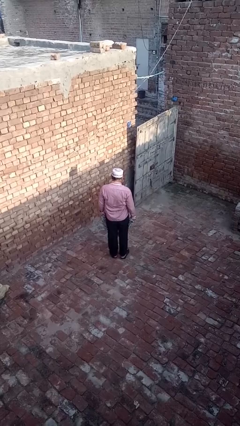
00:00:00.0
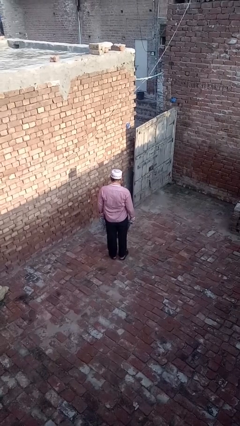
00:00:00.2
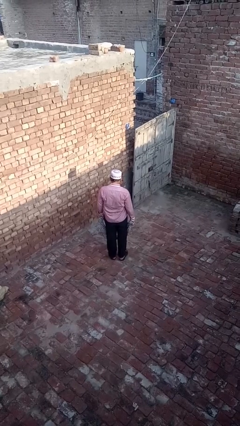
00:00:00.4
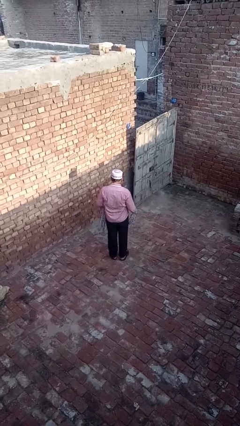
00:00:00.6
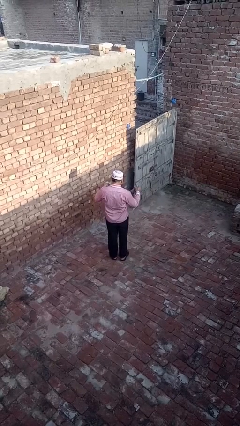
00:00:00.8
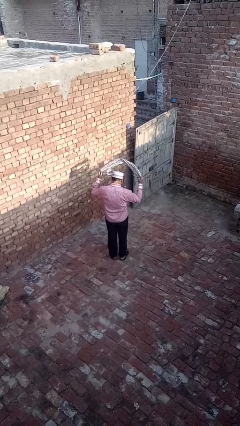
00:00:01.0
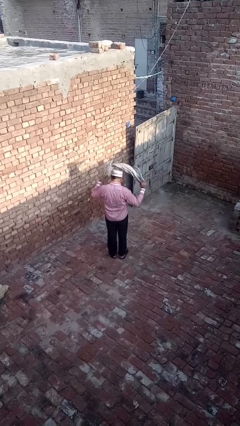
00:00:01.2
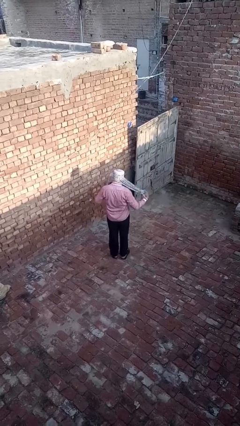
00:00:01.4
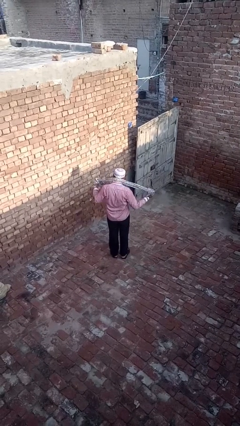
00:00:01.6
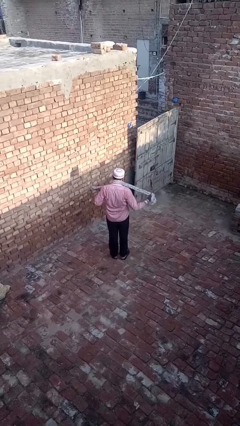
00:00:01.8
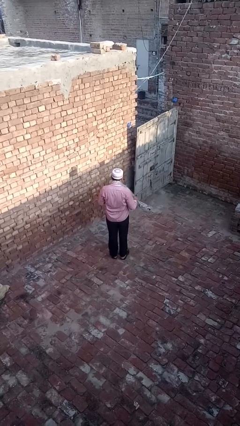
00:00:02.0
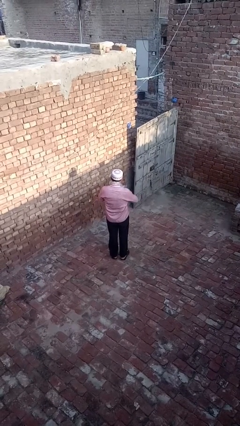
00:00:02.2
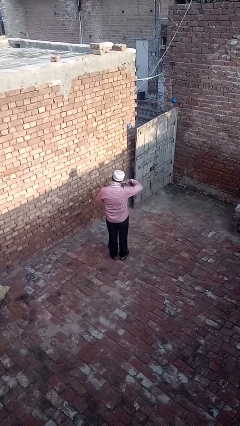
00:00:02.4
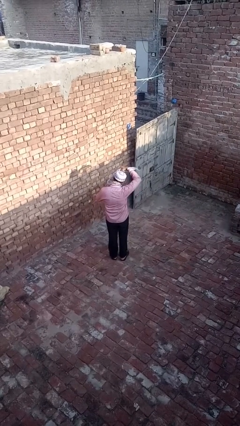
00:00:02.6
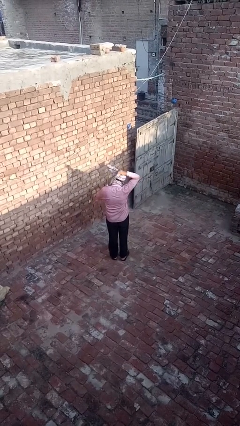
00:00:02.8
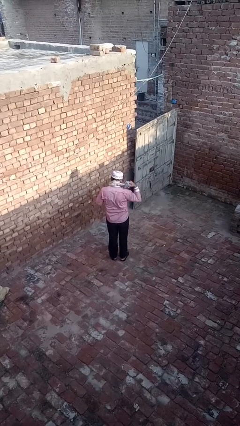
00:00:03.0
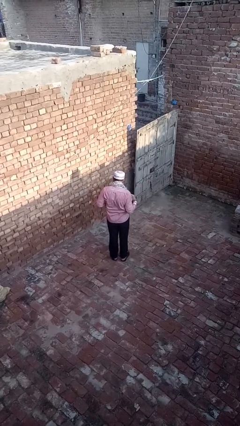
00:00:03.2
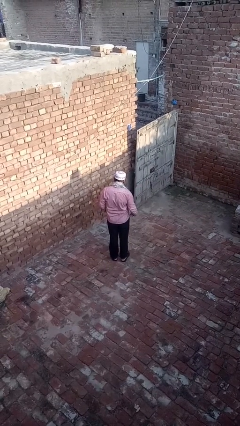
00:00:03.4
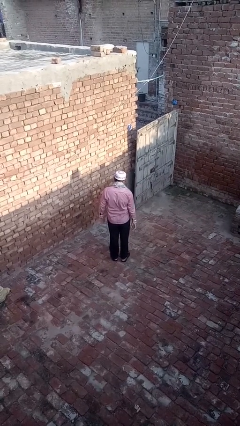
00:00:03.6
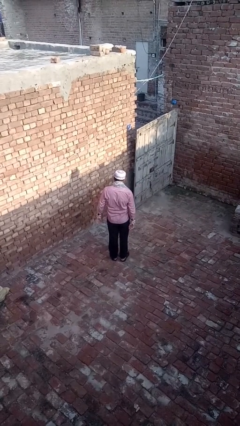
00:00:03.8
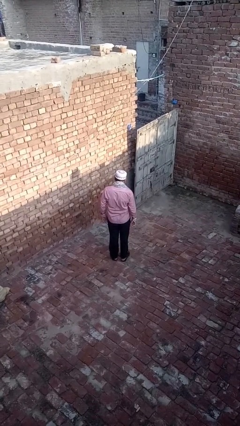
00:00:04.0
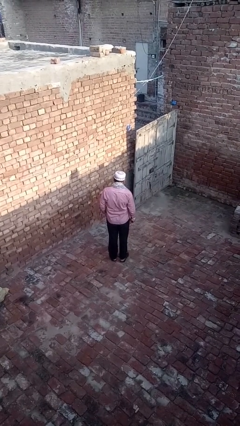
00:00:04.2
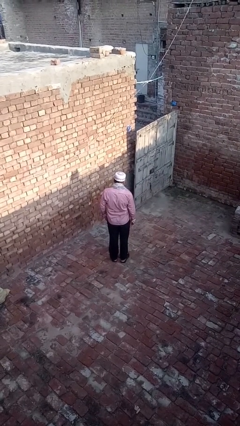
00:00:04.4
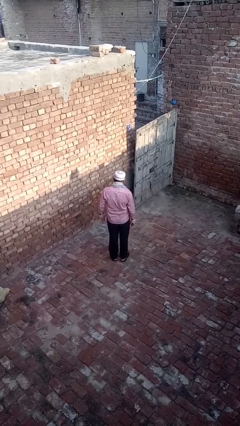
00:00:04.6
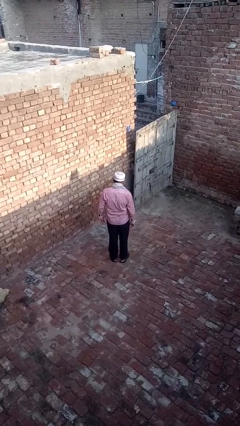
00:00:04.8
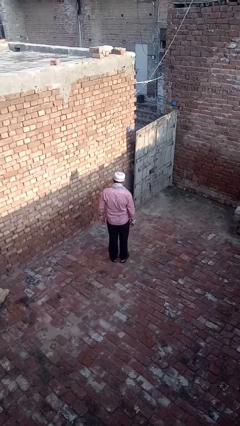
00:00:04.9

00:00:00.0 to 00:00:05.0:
person puts on scarf

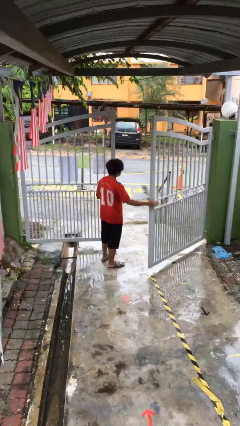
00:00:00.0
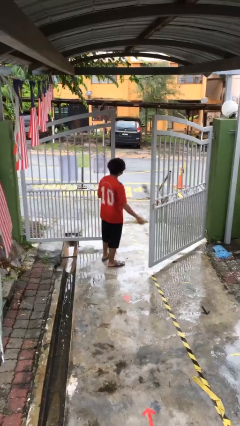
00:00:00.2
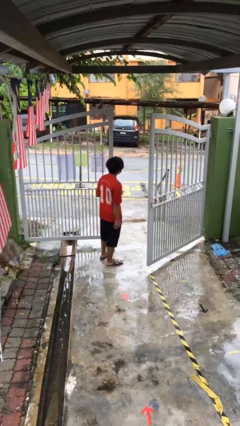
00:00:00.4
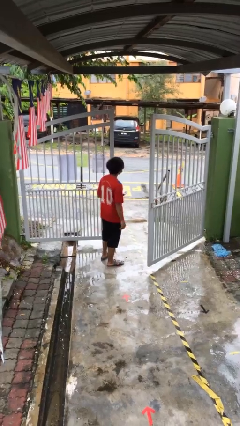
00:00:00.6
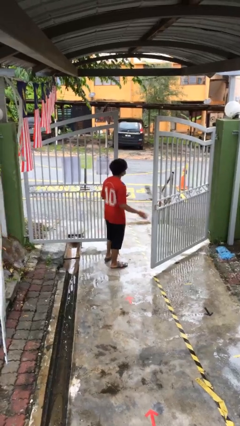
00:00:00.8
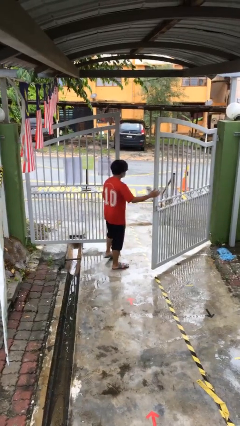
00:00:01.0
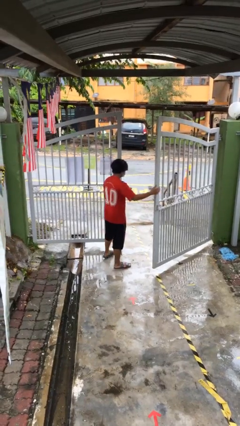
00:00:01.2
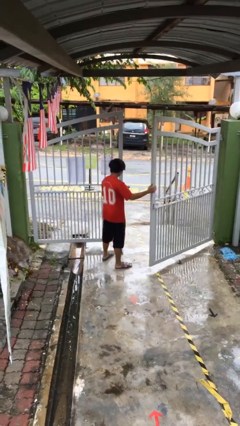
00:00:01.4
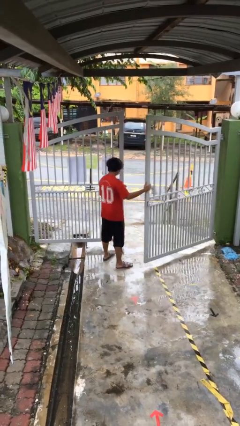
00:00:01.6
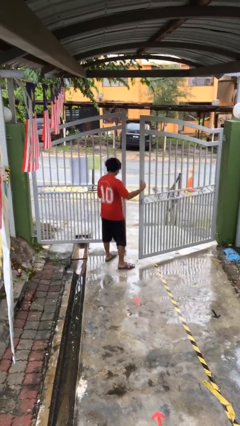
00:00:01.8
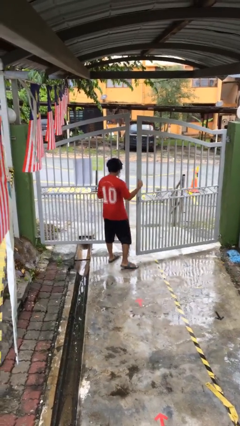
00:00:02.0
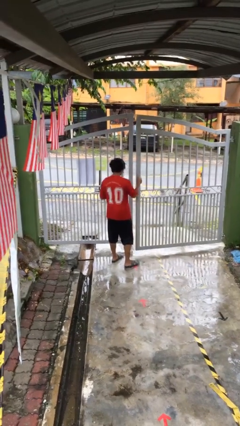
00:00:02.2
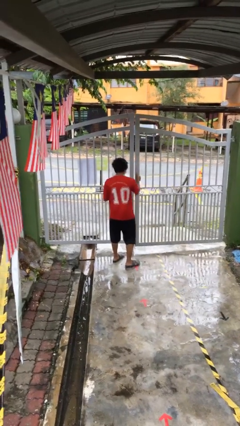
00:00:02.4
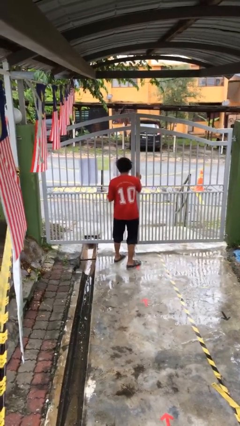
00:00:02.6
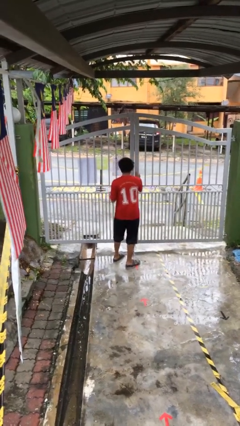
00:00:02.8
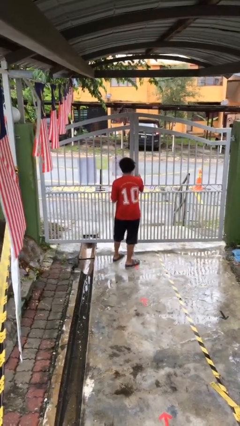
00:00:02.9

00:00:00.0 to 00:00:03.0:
person closes facility door

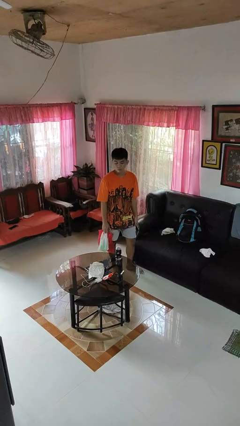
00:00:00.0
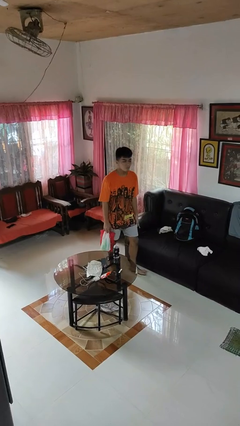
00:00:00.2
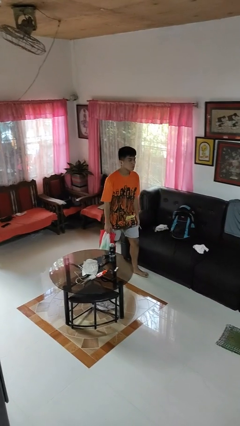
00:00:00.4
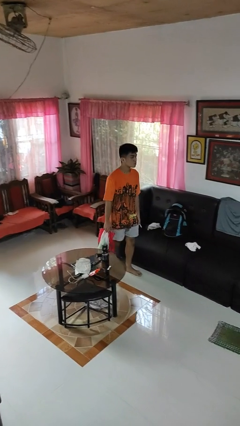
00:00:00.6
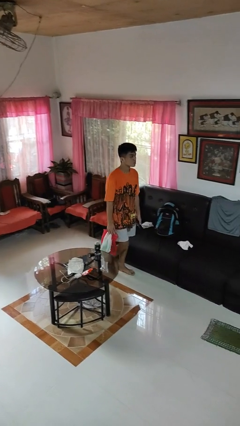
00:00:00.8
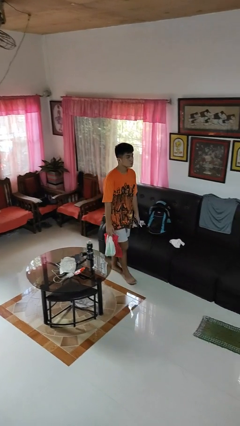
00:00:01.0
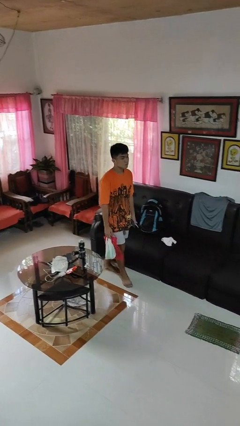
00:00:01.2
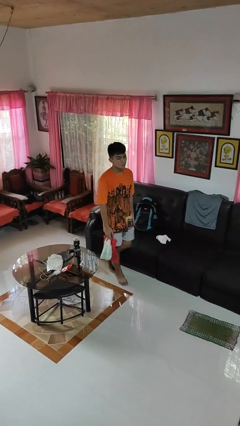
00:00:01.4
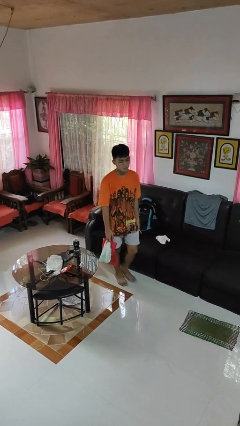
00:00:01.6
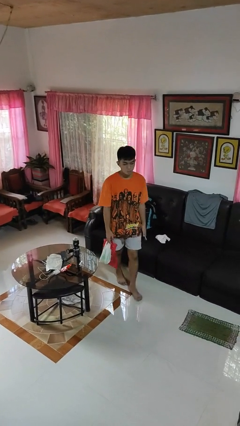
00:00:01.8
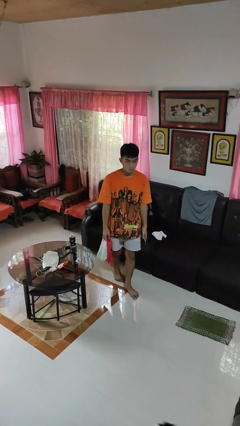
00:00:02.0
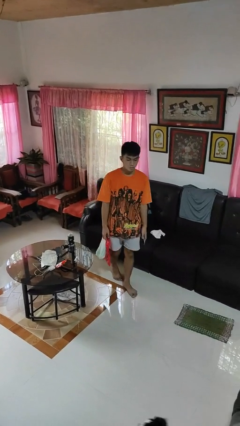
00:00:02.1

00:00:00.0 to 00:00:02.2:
person carries groceries

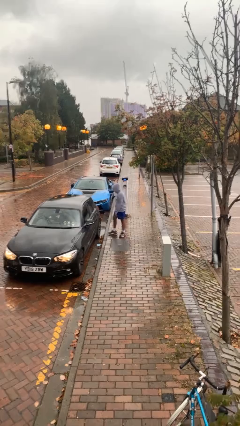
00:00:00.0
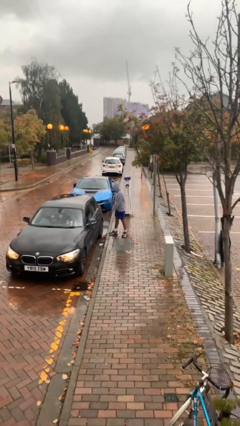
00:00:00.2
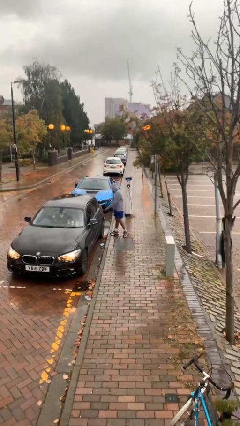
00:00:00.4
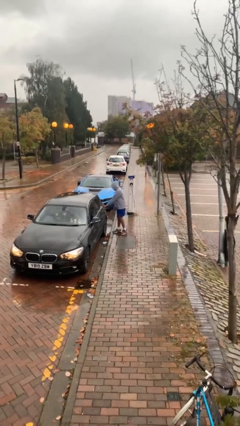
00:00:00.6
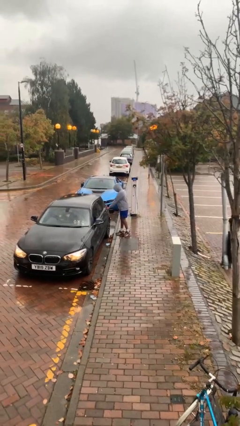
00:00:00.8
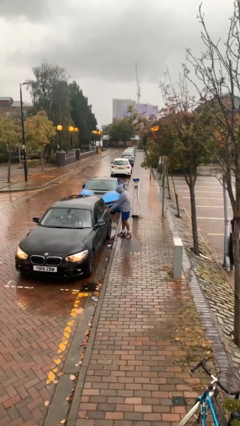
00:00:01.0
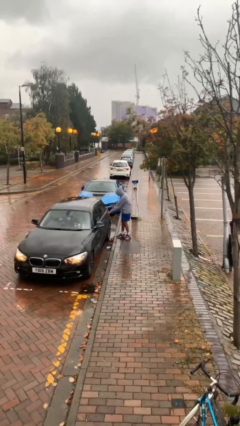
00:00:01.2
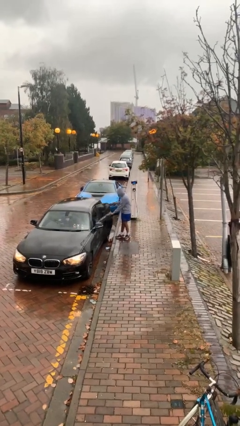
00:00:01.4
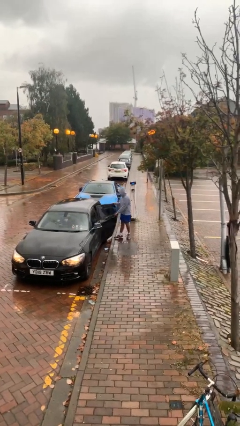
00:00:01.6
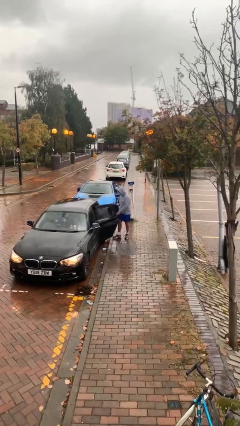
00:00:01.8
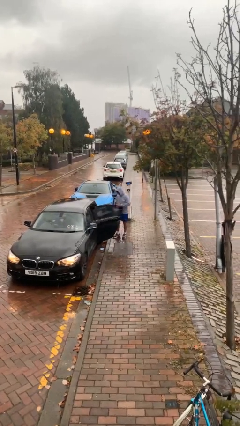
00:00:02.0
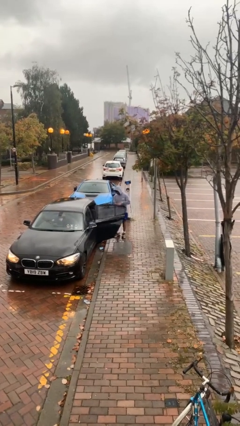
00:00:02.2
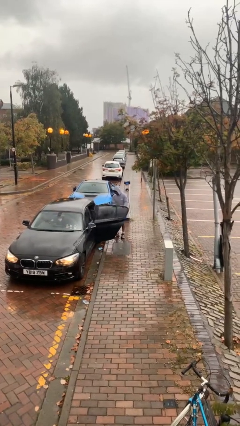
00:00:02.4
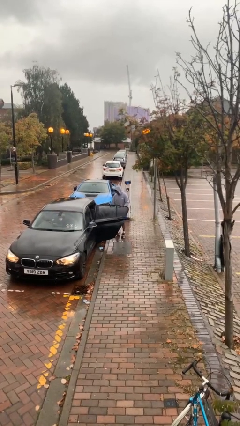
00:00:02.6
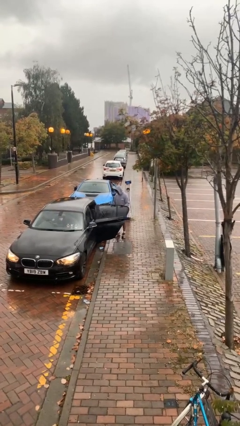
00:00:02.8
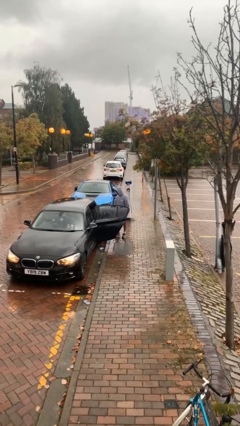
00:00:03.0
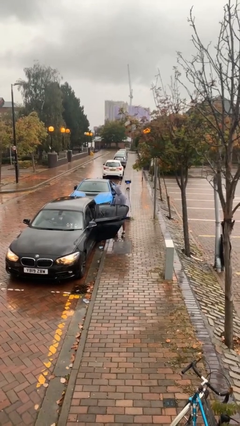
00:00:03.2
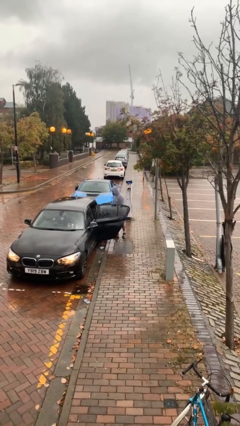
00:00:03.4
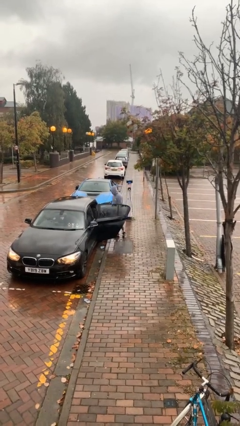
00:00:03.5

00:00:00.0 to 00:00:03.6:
person opens car door

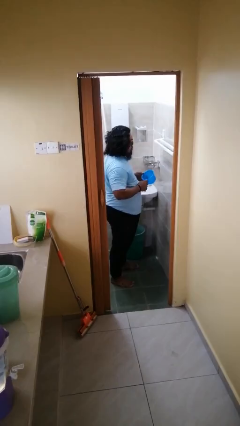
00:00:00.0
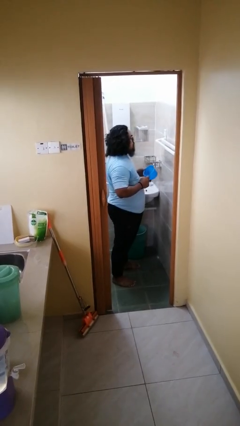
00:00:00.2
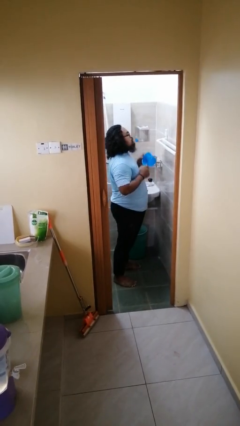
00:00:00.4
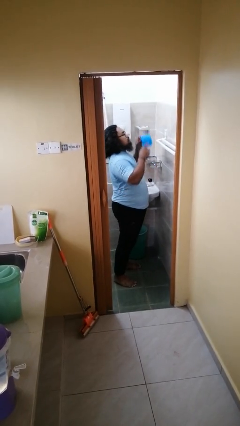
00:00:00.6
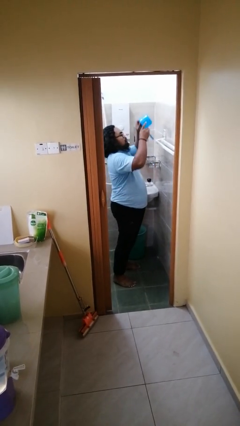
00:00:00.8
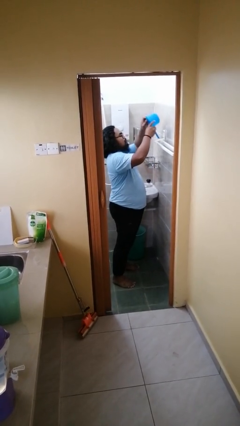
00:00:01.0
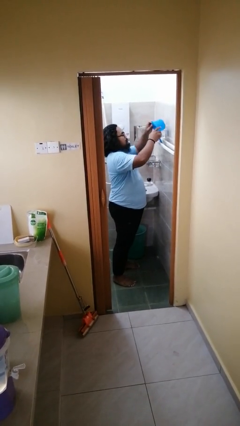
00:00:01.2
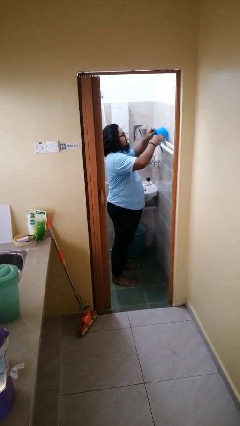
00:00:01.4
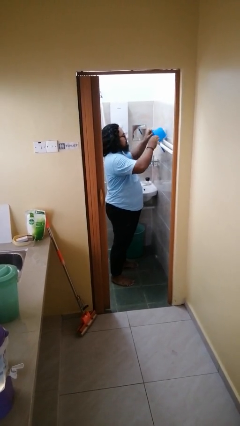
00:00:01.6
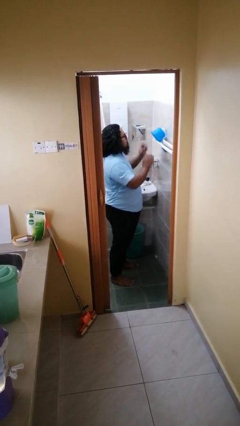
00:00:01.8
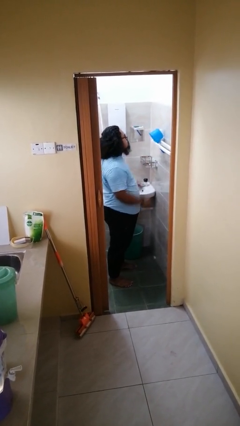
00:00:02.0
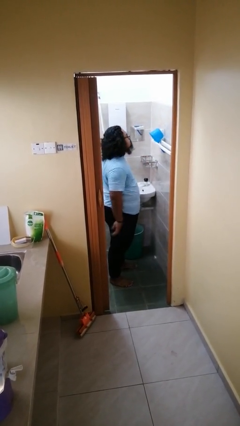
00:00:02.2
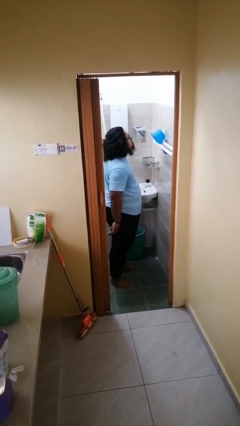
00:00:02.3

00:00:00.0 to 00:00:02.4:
person puts down object on countertop

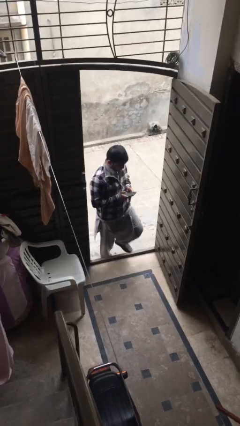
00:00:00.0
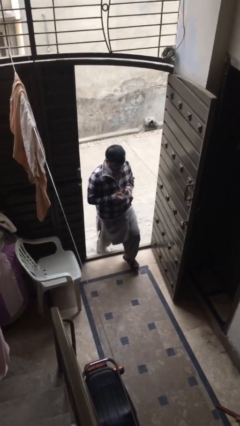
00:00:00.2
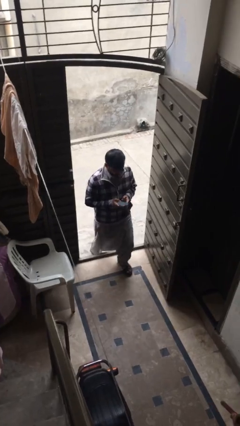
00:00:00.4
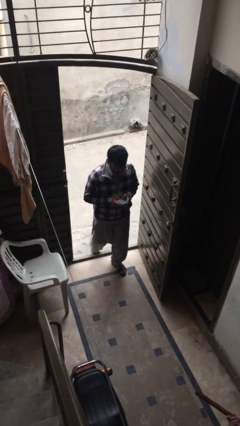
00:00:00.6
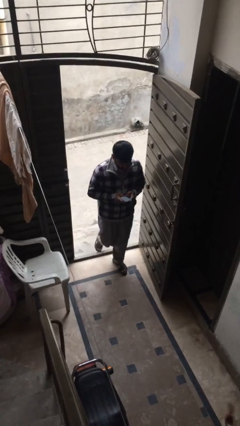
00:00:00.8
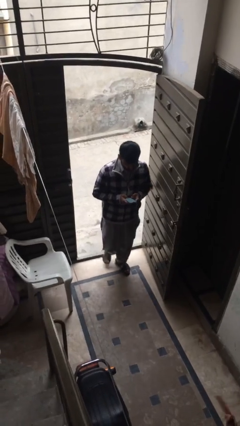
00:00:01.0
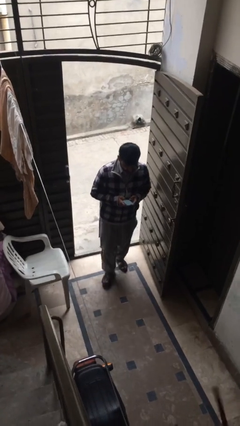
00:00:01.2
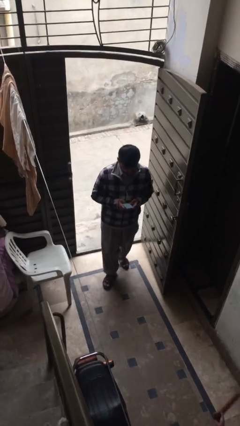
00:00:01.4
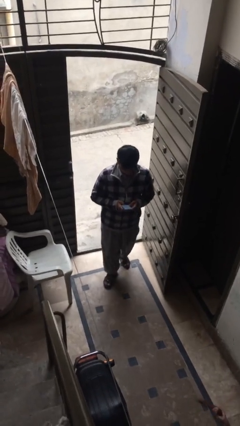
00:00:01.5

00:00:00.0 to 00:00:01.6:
person exits scene through structure
